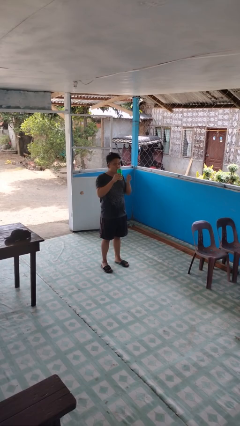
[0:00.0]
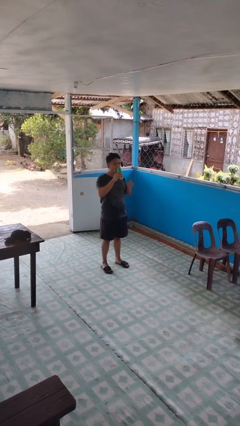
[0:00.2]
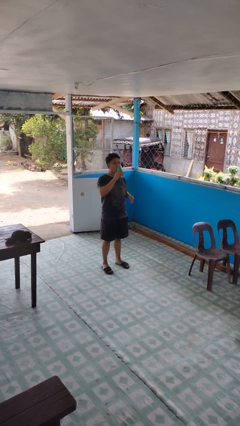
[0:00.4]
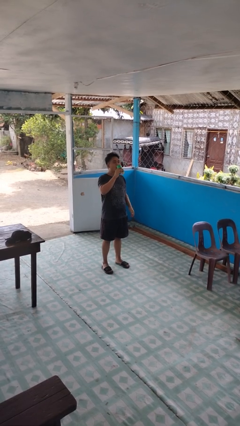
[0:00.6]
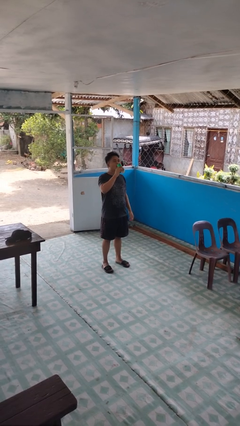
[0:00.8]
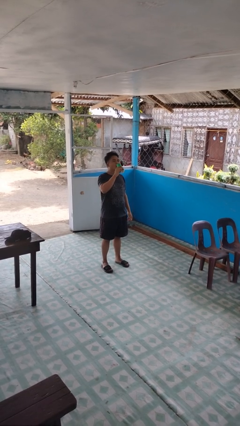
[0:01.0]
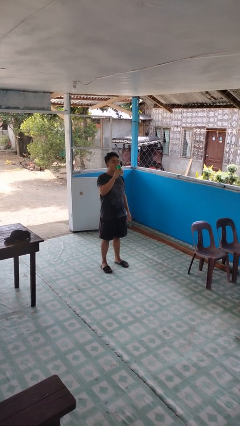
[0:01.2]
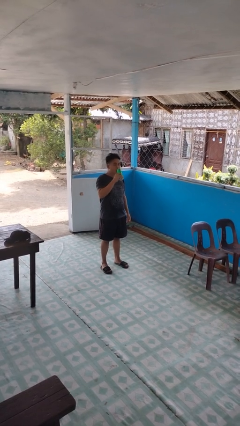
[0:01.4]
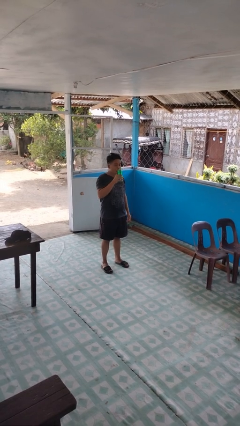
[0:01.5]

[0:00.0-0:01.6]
person drinks from beverage can

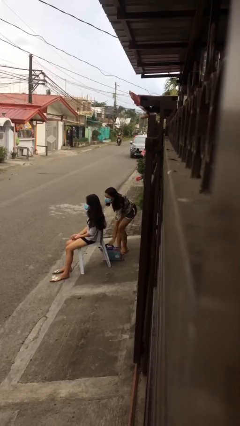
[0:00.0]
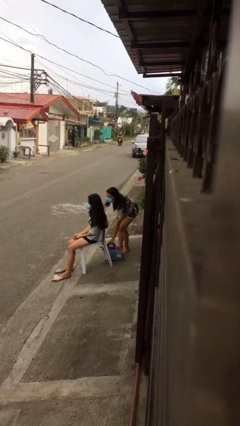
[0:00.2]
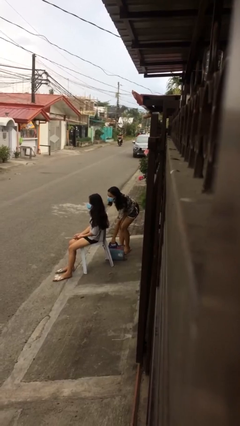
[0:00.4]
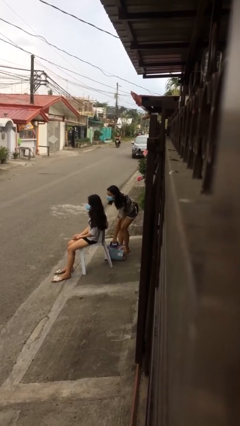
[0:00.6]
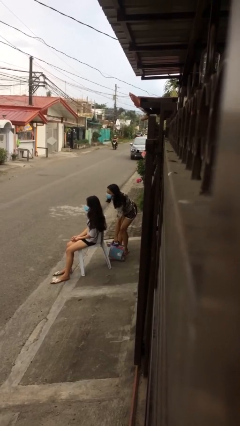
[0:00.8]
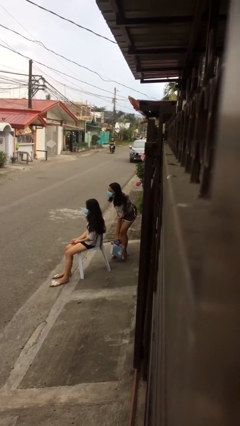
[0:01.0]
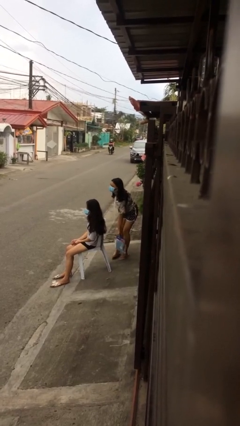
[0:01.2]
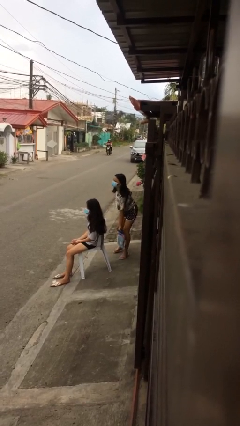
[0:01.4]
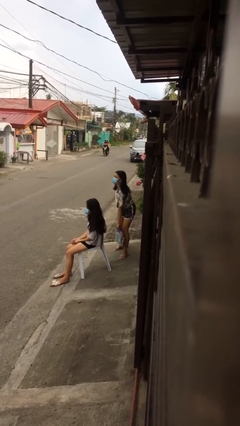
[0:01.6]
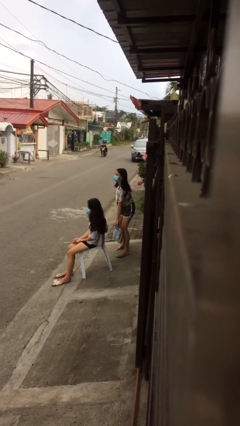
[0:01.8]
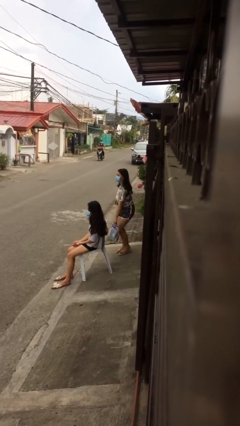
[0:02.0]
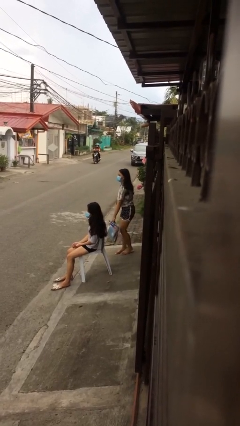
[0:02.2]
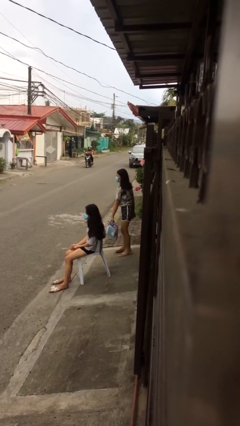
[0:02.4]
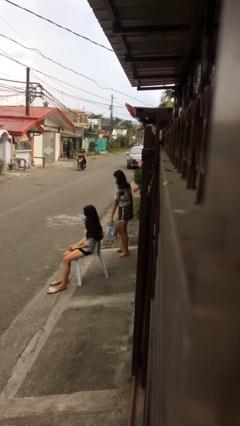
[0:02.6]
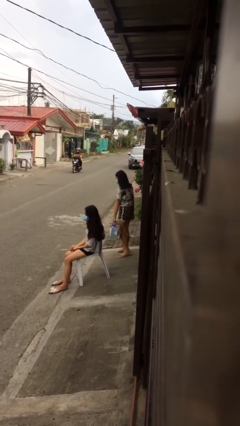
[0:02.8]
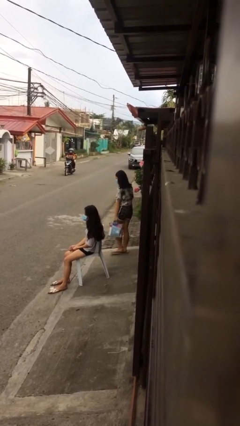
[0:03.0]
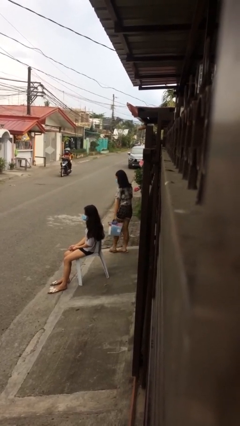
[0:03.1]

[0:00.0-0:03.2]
person steals object from person

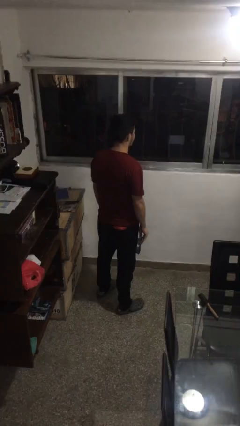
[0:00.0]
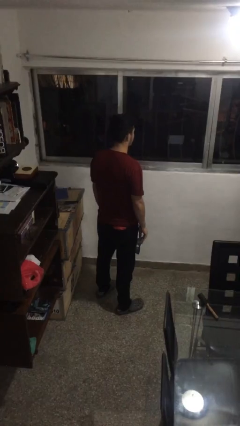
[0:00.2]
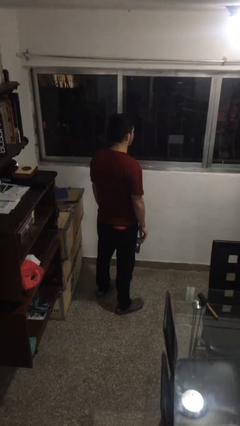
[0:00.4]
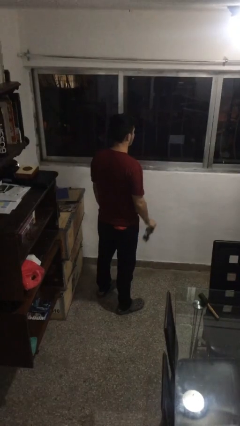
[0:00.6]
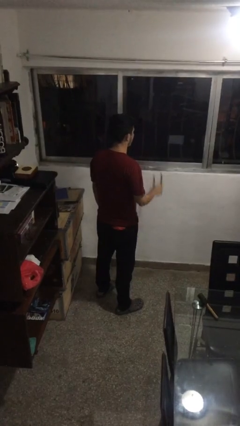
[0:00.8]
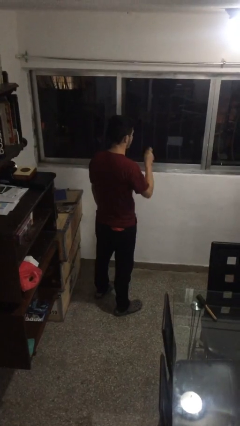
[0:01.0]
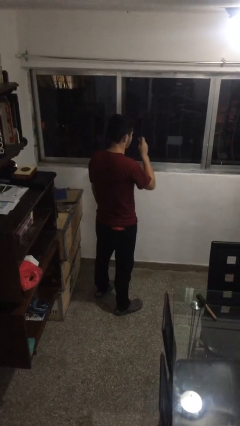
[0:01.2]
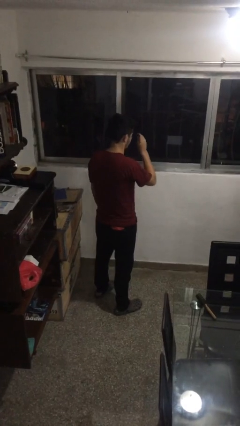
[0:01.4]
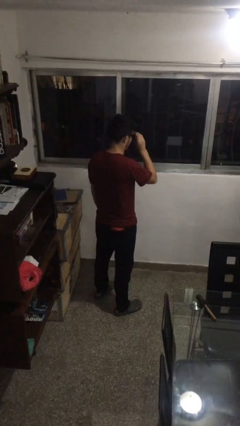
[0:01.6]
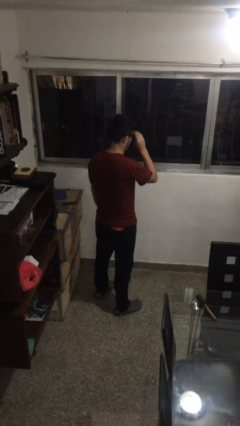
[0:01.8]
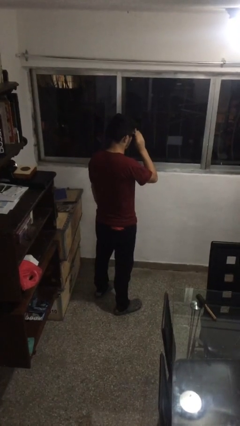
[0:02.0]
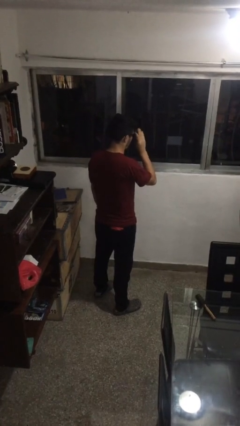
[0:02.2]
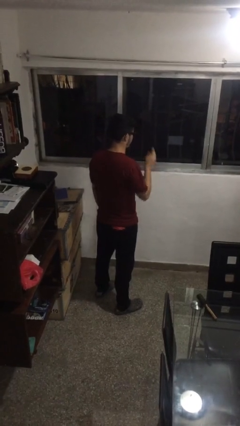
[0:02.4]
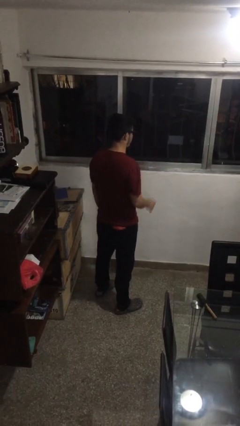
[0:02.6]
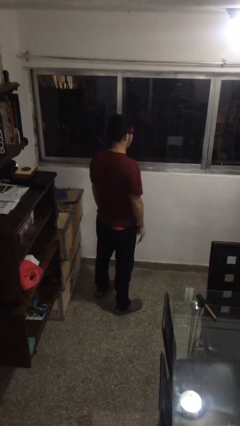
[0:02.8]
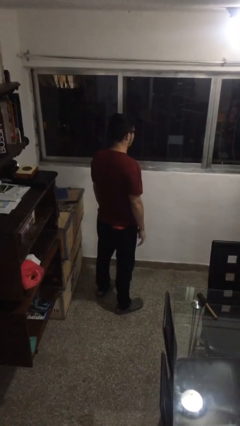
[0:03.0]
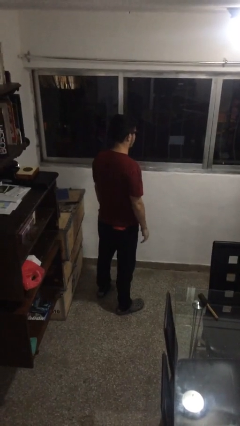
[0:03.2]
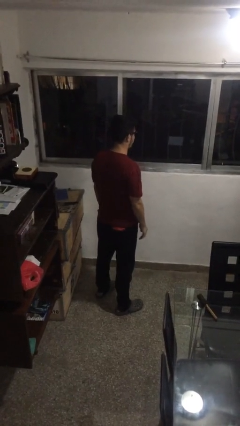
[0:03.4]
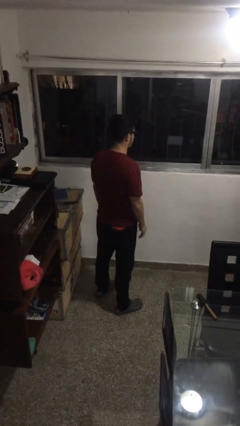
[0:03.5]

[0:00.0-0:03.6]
person puts on sunglasses

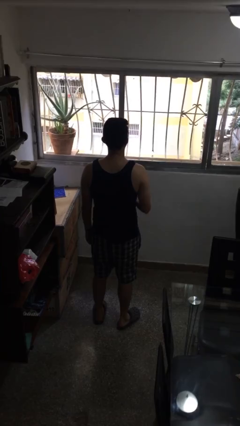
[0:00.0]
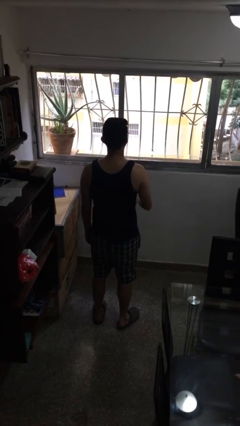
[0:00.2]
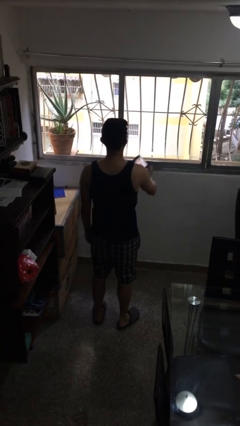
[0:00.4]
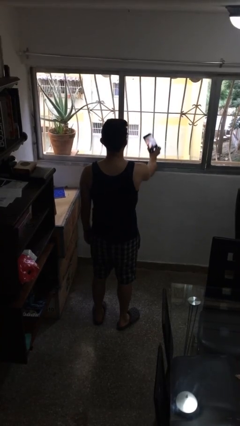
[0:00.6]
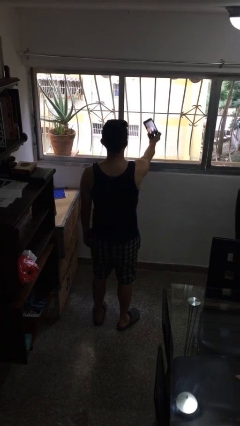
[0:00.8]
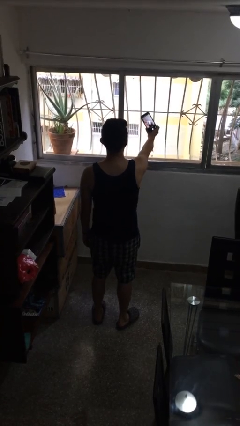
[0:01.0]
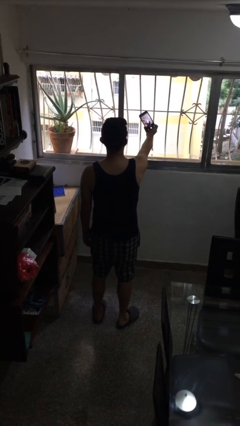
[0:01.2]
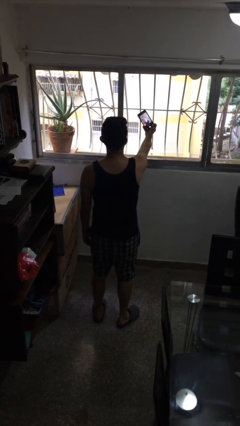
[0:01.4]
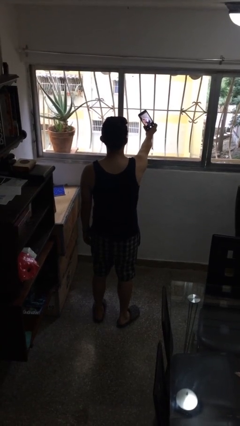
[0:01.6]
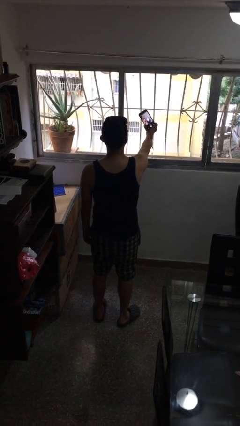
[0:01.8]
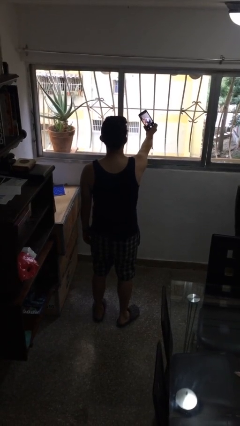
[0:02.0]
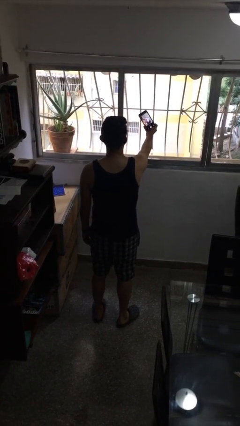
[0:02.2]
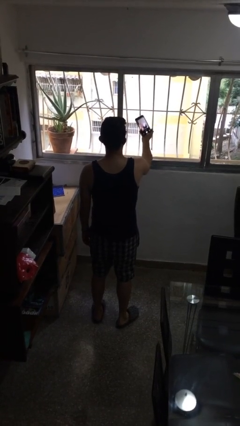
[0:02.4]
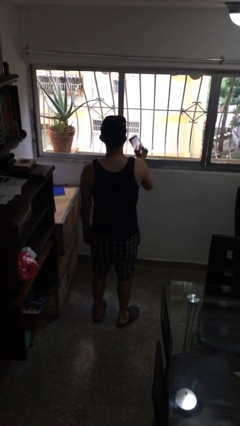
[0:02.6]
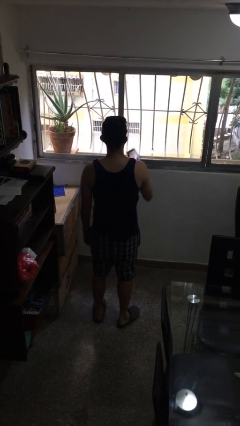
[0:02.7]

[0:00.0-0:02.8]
person takes selfie

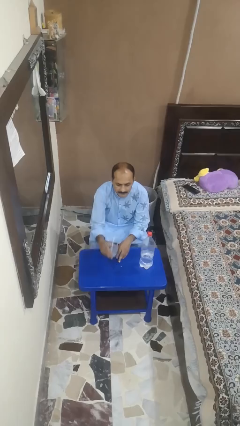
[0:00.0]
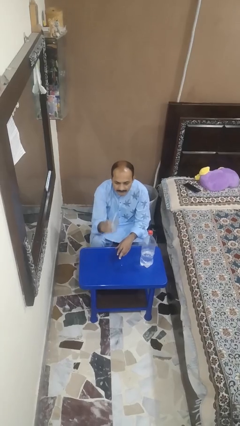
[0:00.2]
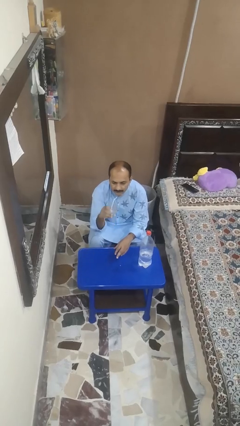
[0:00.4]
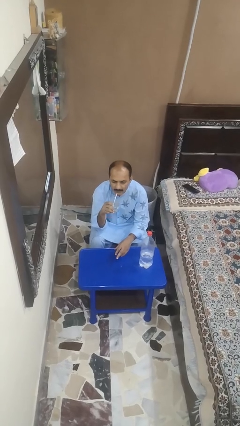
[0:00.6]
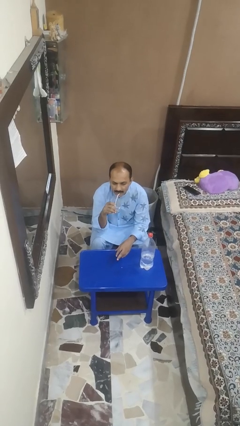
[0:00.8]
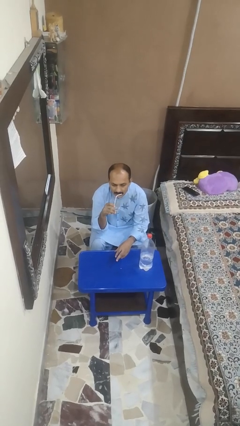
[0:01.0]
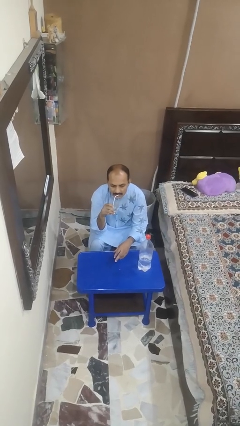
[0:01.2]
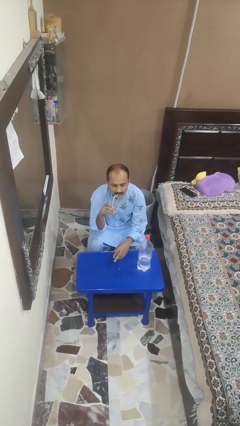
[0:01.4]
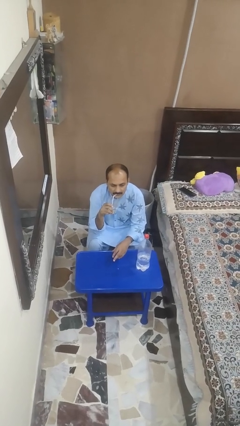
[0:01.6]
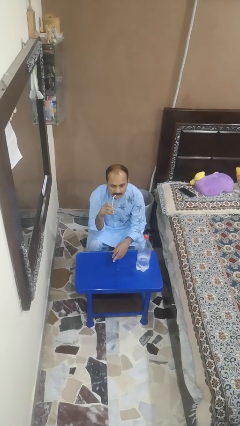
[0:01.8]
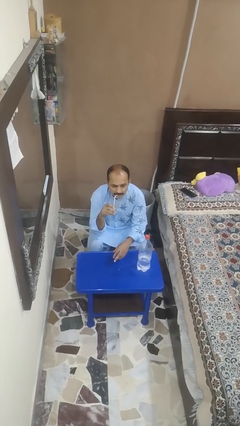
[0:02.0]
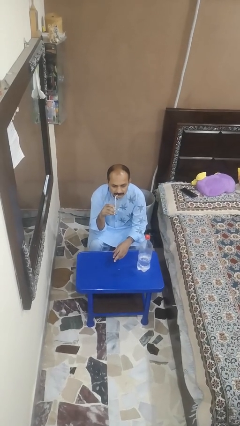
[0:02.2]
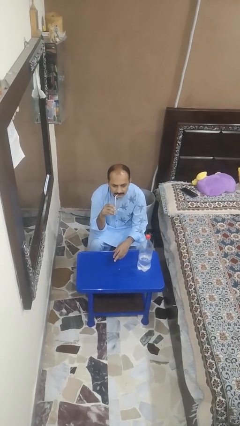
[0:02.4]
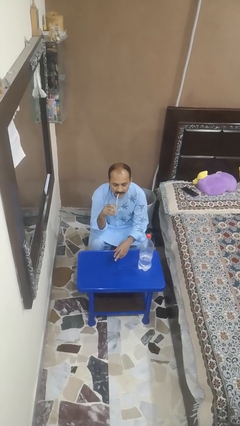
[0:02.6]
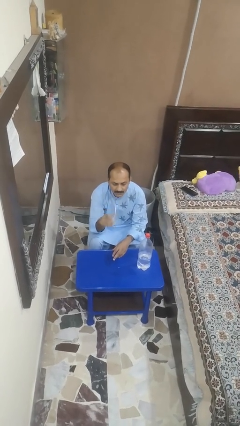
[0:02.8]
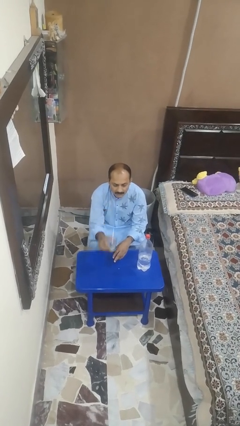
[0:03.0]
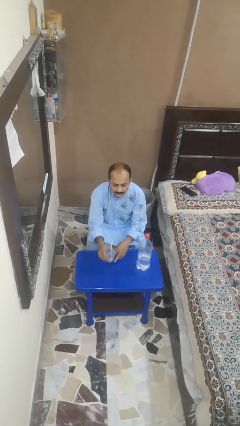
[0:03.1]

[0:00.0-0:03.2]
person drinks from straw

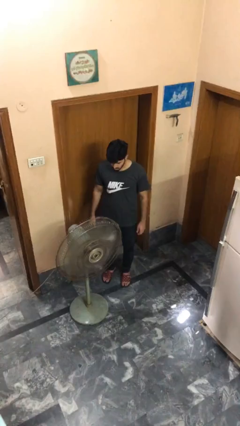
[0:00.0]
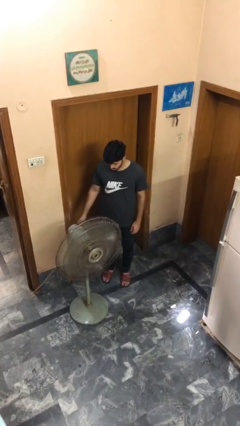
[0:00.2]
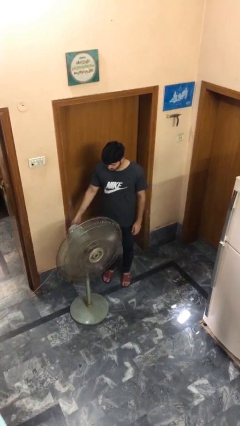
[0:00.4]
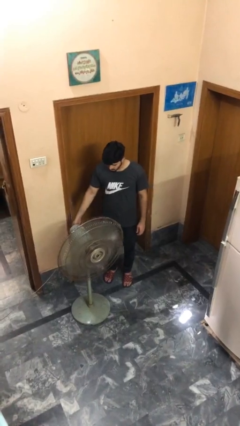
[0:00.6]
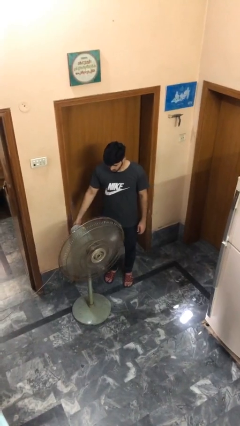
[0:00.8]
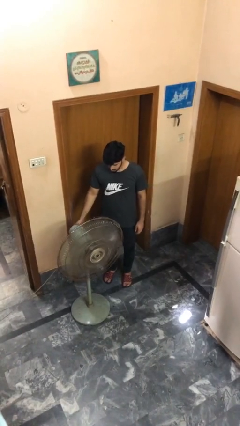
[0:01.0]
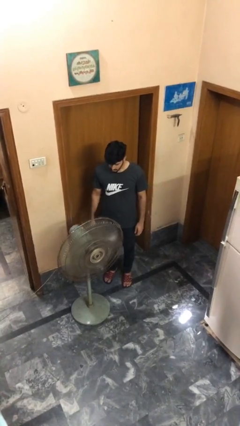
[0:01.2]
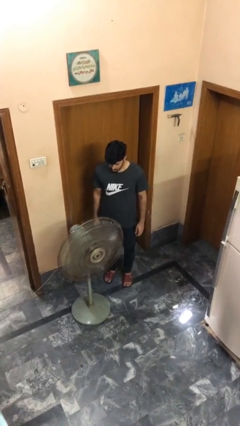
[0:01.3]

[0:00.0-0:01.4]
person turns off fan

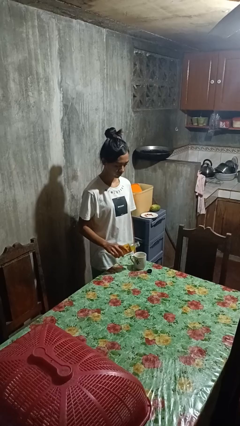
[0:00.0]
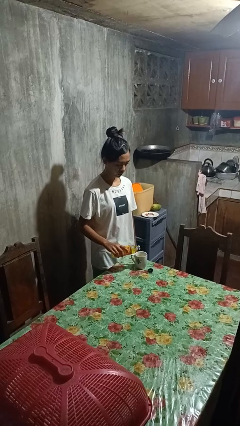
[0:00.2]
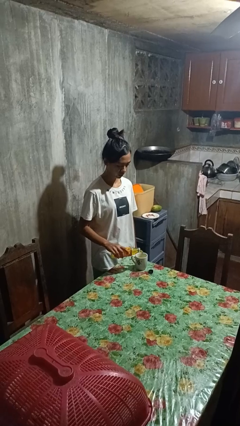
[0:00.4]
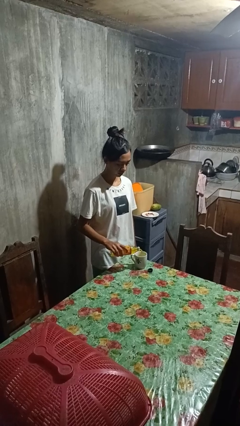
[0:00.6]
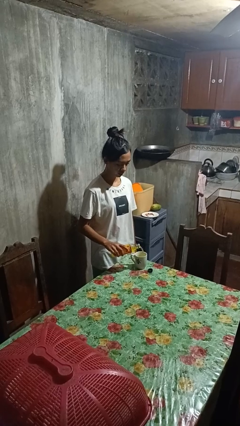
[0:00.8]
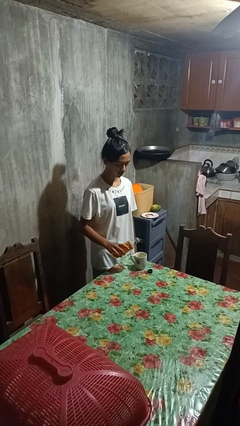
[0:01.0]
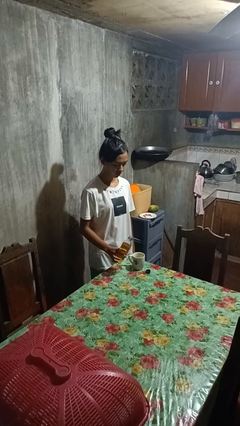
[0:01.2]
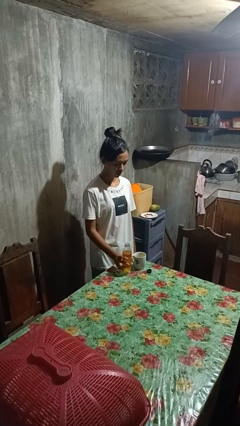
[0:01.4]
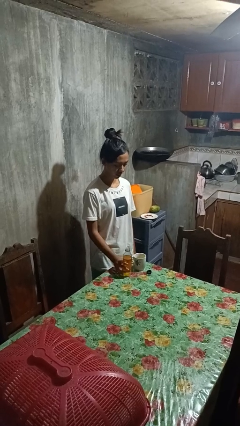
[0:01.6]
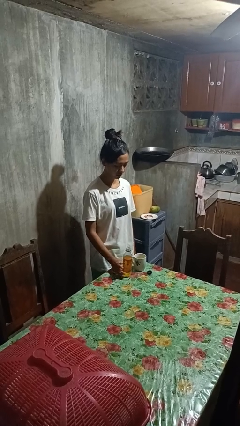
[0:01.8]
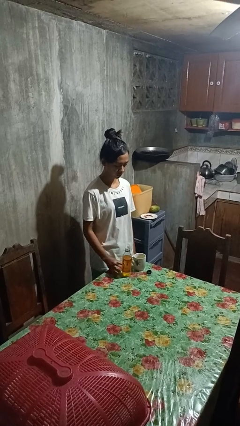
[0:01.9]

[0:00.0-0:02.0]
person pours liquid into cup
